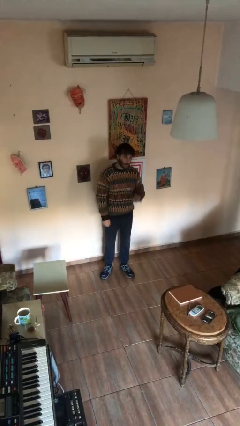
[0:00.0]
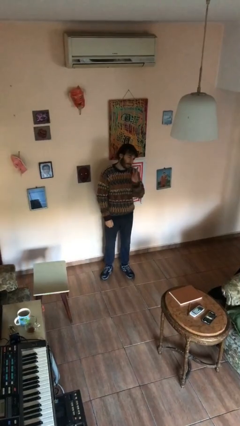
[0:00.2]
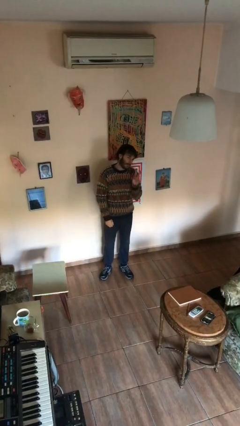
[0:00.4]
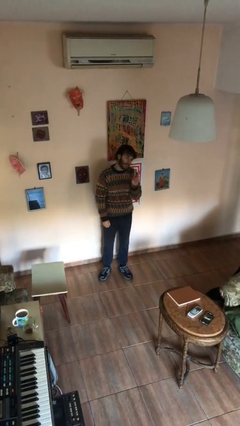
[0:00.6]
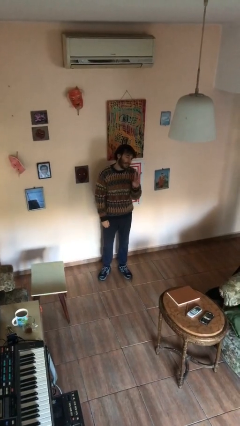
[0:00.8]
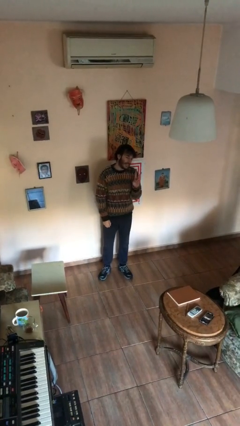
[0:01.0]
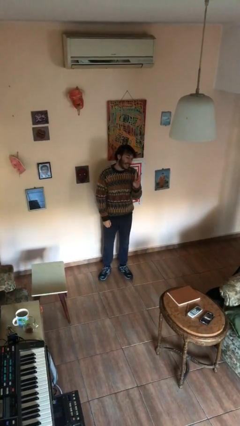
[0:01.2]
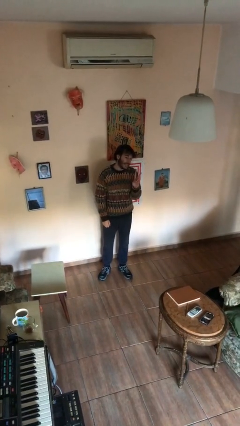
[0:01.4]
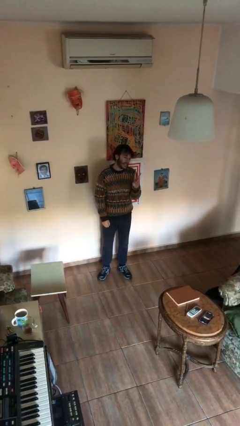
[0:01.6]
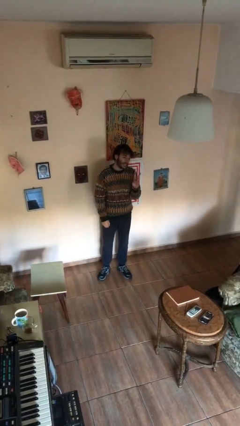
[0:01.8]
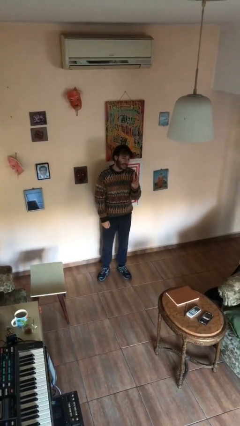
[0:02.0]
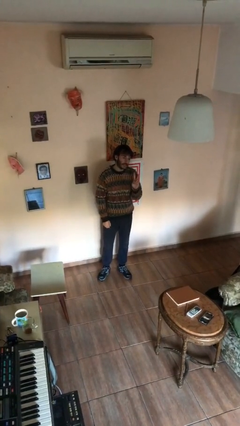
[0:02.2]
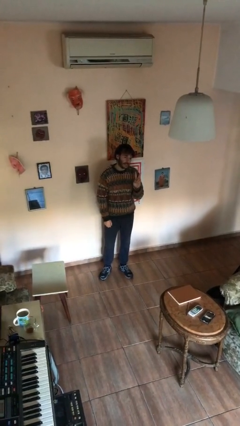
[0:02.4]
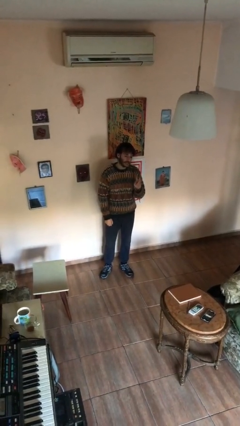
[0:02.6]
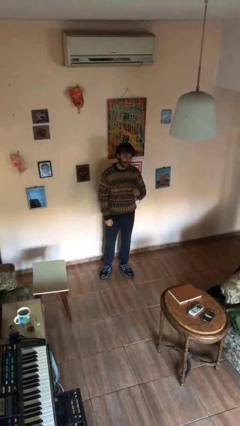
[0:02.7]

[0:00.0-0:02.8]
person gestures peace

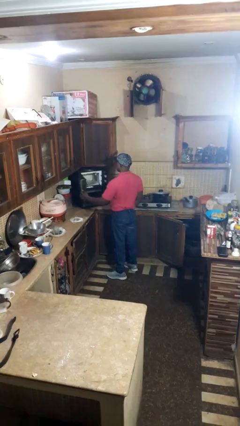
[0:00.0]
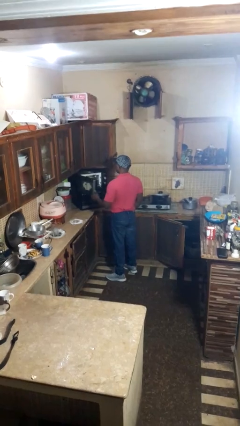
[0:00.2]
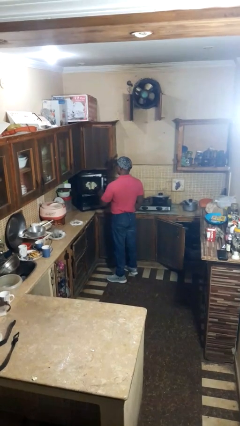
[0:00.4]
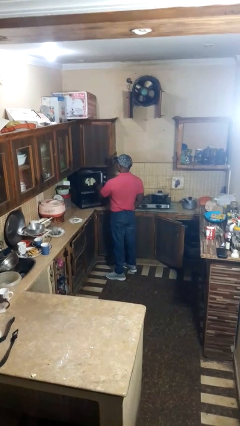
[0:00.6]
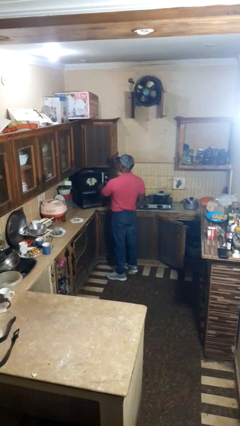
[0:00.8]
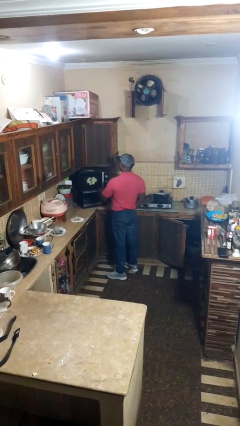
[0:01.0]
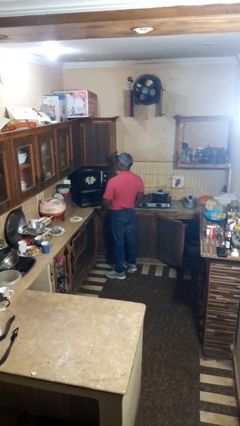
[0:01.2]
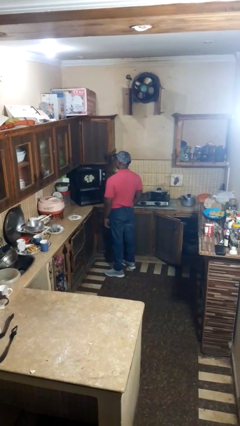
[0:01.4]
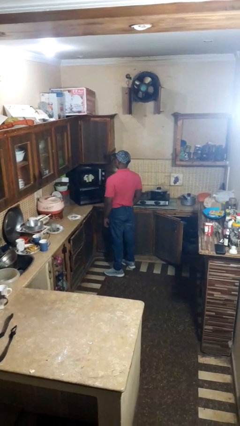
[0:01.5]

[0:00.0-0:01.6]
person closes microwave

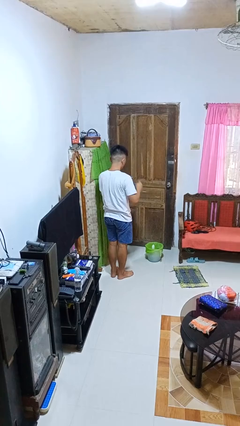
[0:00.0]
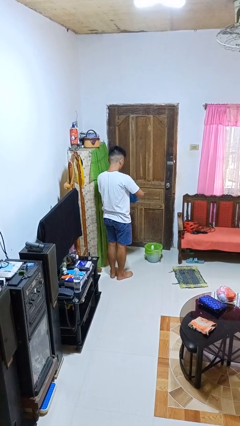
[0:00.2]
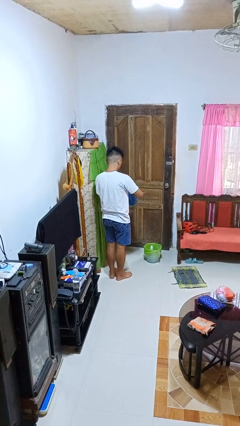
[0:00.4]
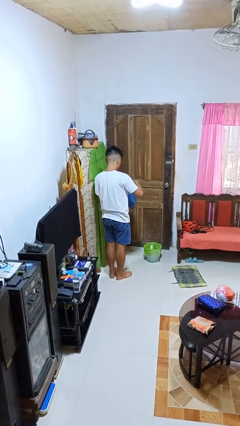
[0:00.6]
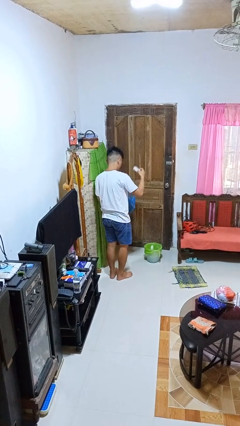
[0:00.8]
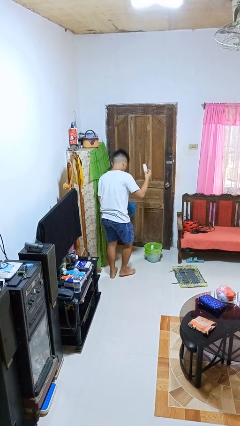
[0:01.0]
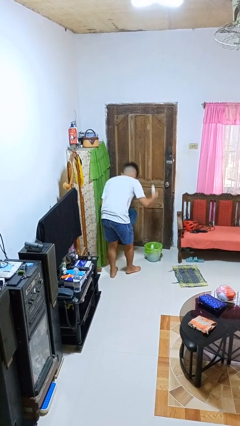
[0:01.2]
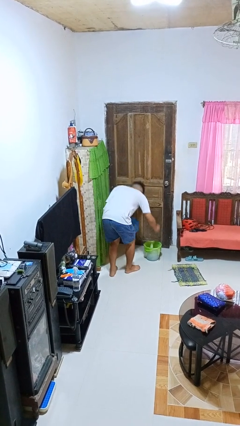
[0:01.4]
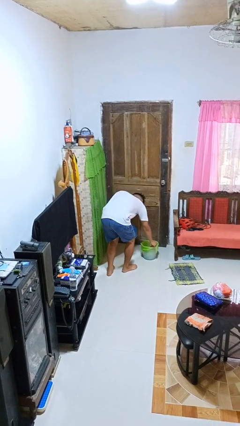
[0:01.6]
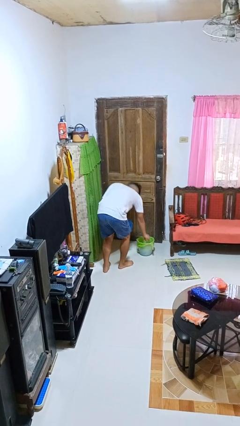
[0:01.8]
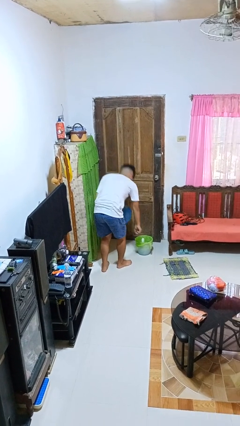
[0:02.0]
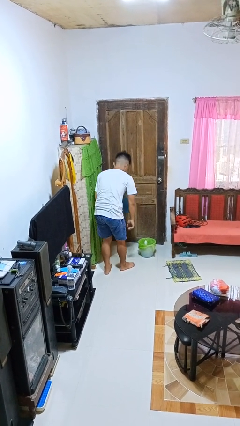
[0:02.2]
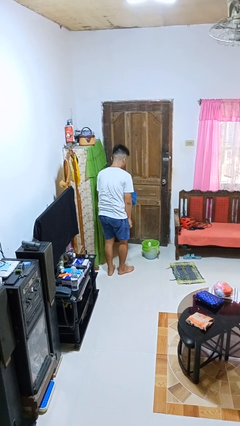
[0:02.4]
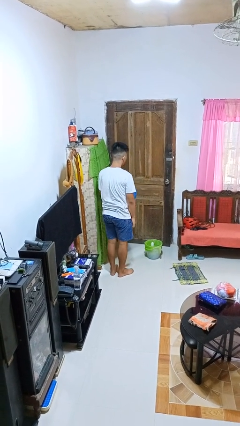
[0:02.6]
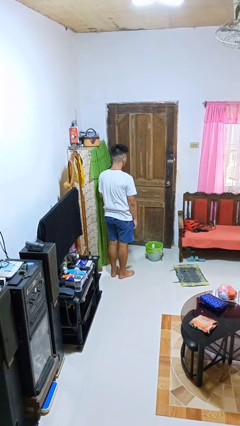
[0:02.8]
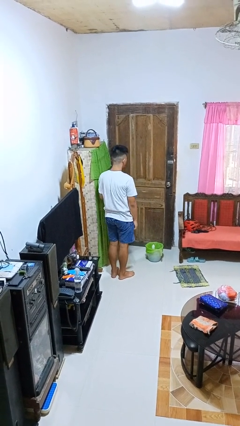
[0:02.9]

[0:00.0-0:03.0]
person discards trash

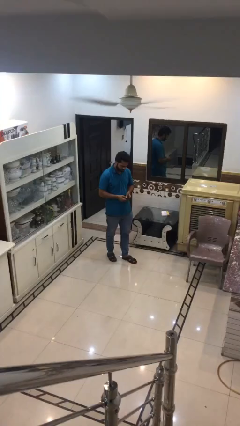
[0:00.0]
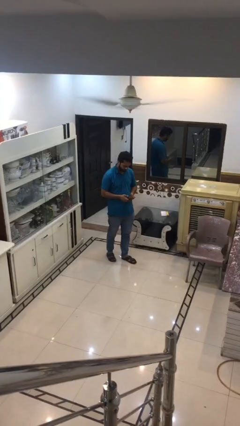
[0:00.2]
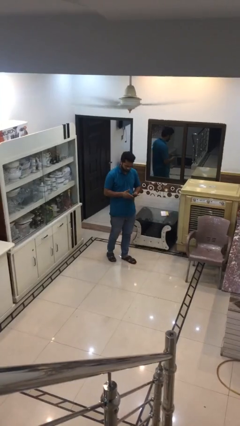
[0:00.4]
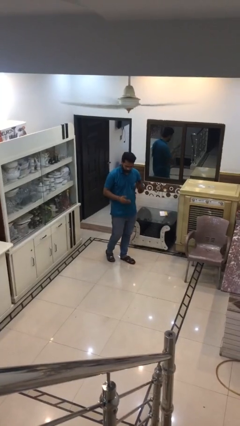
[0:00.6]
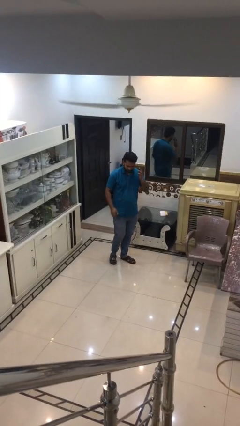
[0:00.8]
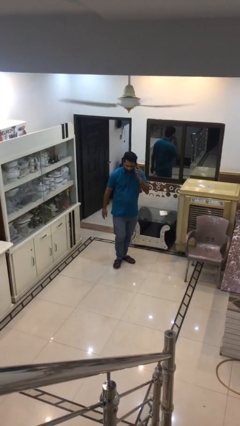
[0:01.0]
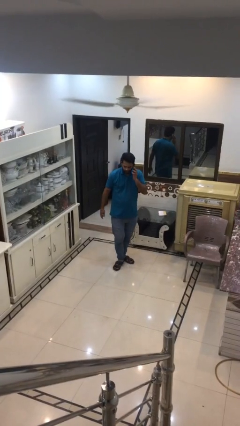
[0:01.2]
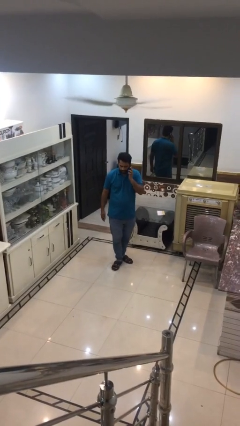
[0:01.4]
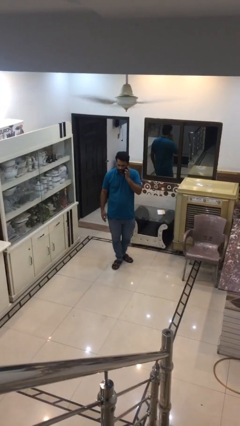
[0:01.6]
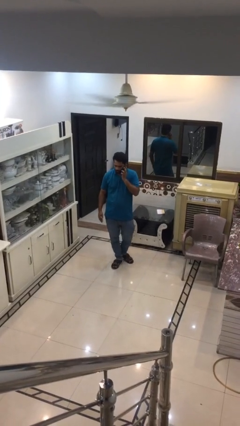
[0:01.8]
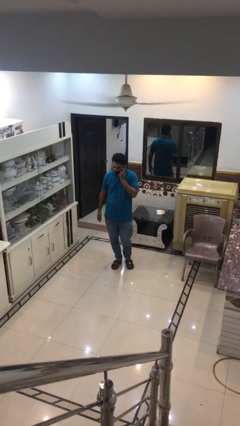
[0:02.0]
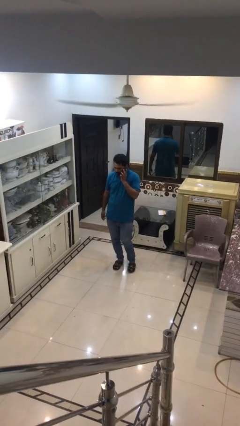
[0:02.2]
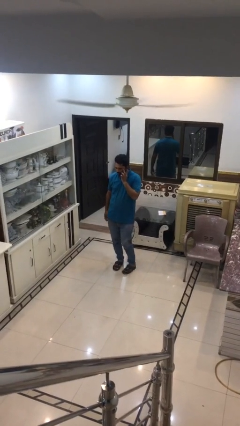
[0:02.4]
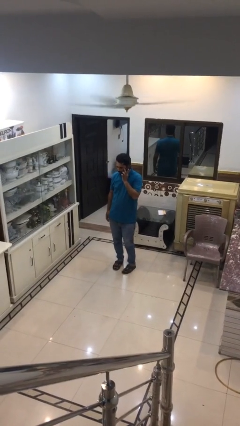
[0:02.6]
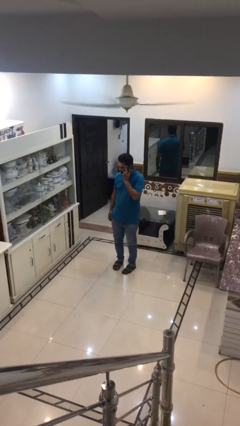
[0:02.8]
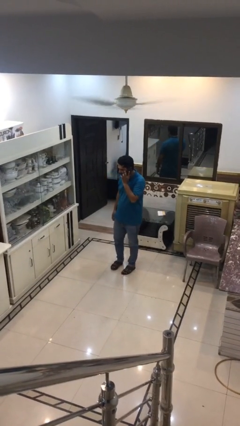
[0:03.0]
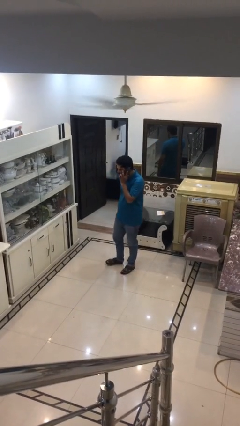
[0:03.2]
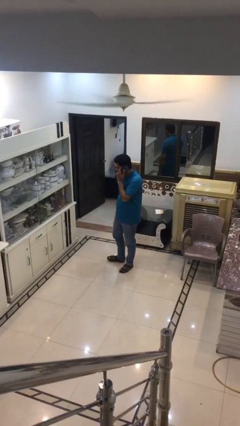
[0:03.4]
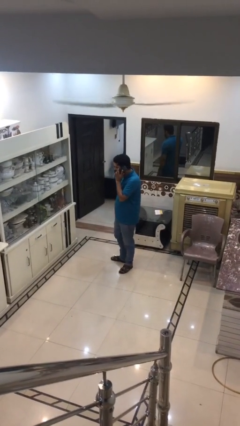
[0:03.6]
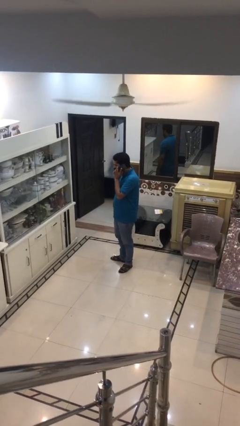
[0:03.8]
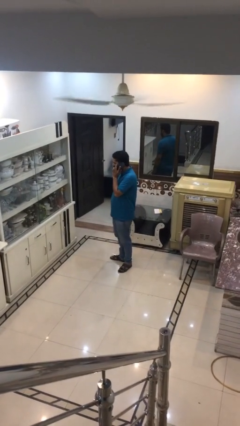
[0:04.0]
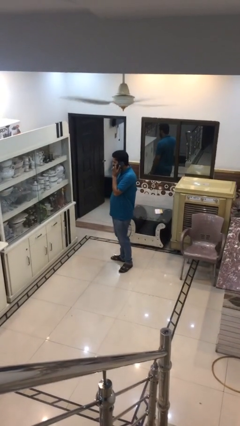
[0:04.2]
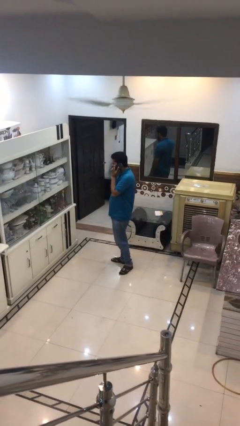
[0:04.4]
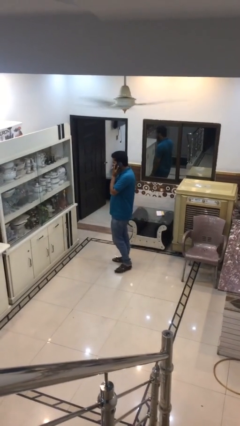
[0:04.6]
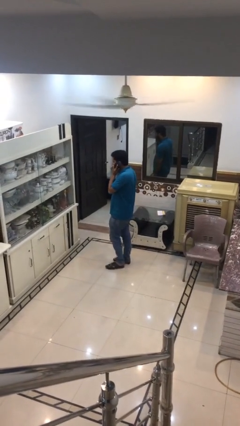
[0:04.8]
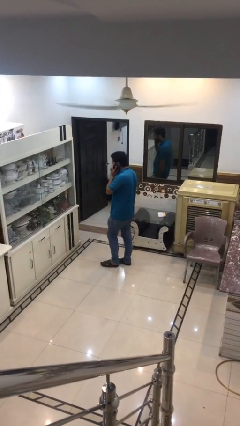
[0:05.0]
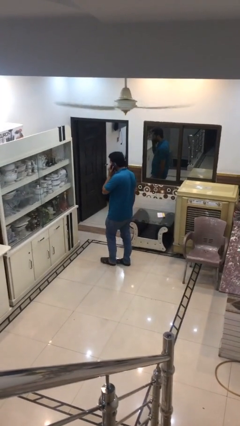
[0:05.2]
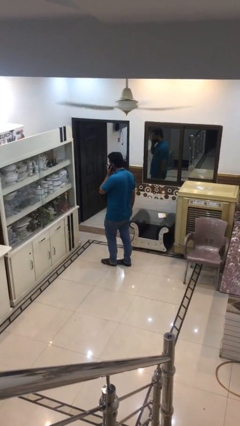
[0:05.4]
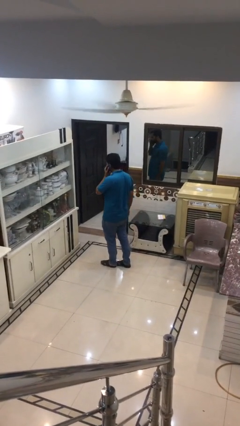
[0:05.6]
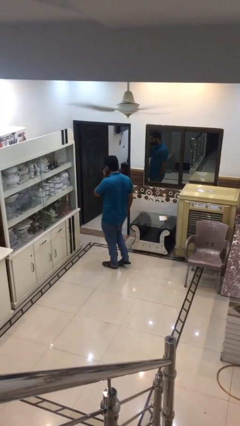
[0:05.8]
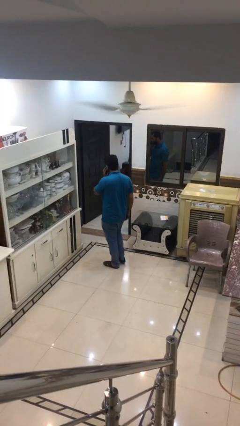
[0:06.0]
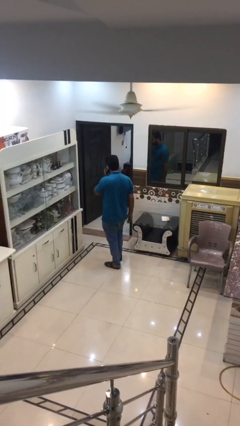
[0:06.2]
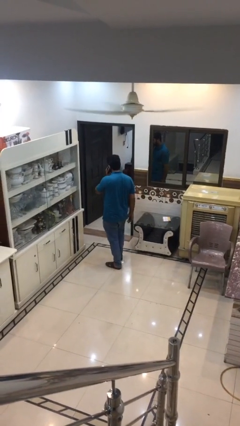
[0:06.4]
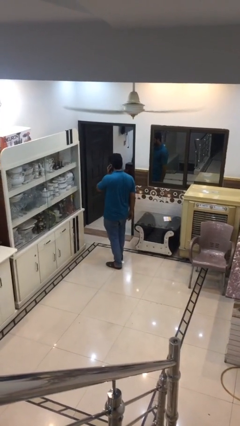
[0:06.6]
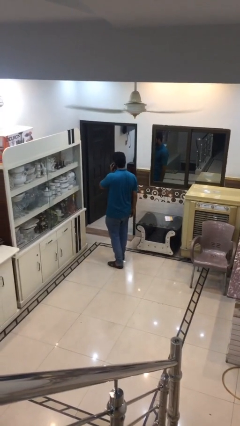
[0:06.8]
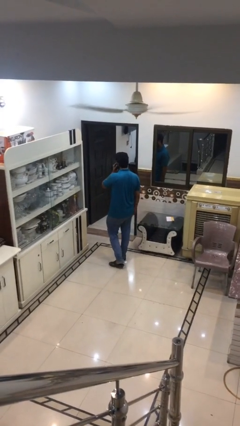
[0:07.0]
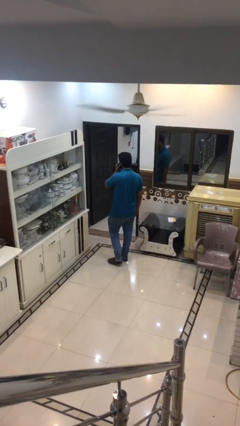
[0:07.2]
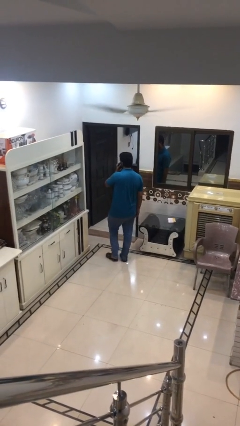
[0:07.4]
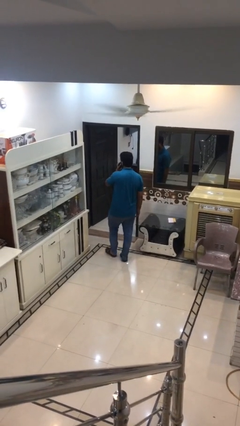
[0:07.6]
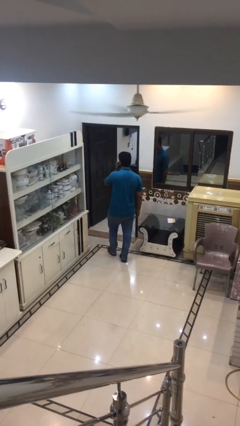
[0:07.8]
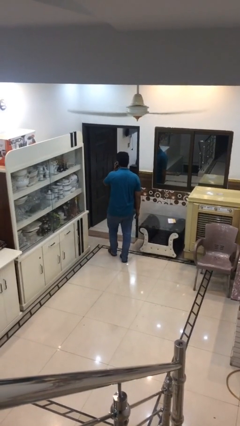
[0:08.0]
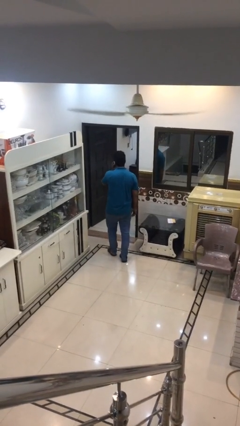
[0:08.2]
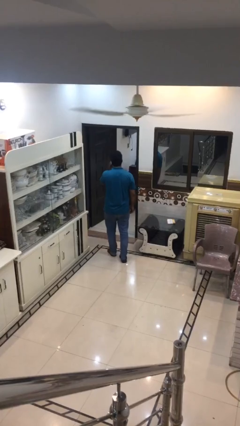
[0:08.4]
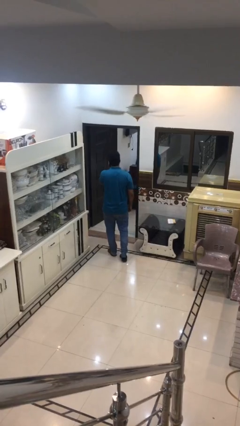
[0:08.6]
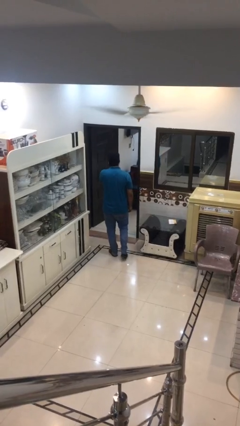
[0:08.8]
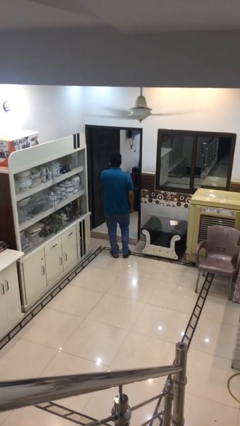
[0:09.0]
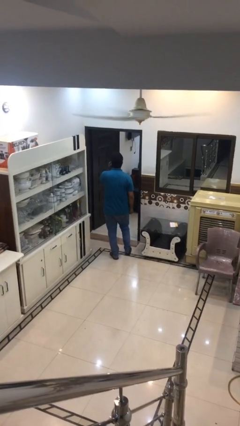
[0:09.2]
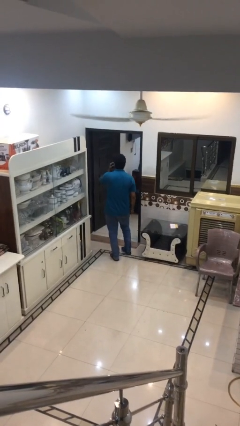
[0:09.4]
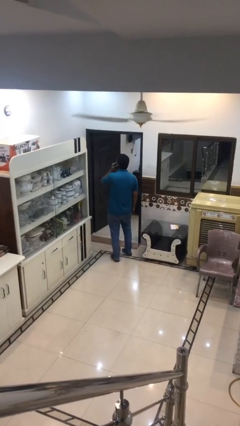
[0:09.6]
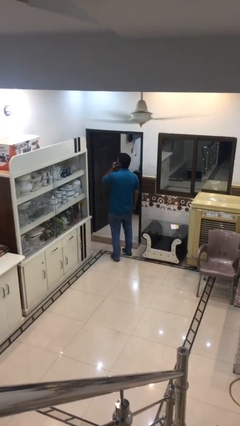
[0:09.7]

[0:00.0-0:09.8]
person talks on phone
